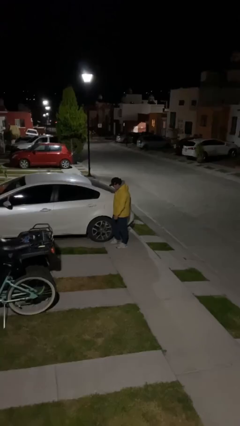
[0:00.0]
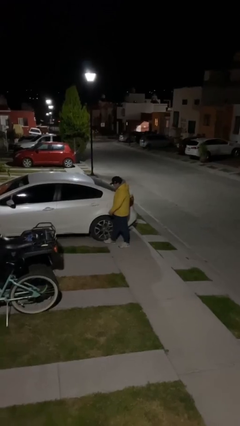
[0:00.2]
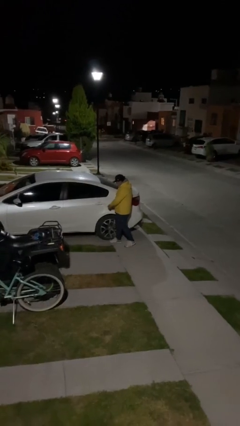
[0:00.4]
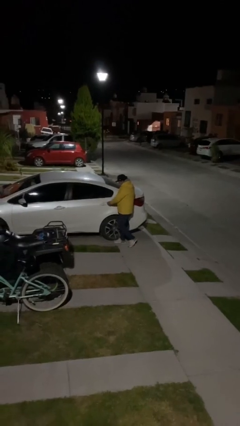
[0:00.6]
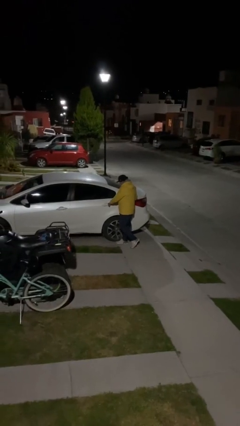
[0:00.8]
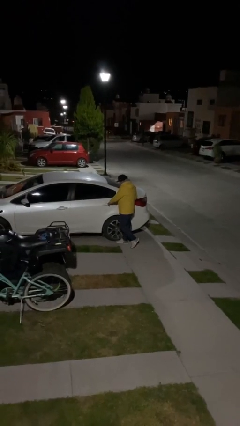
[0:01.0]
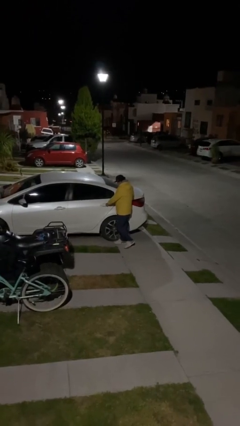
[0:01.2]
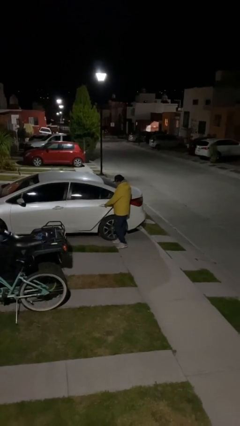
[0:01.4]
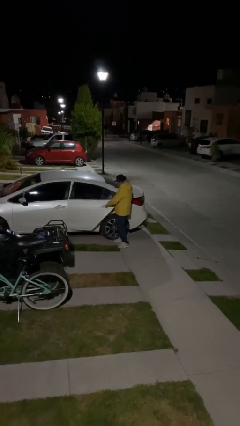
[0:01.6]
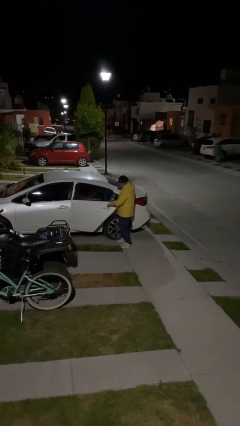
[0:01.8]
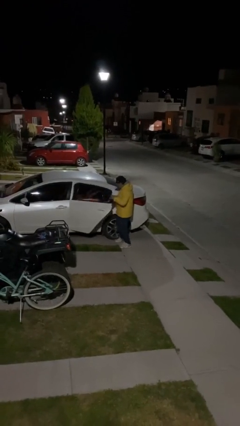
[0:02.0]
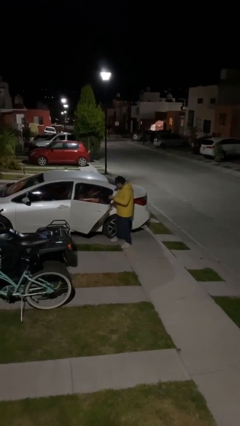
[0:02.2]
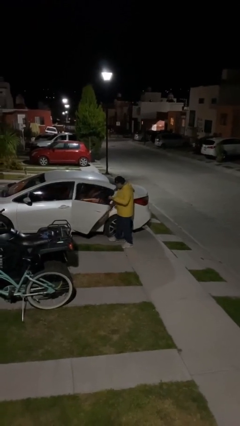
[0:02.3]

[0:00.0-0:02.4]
person opens car door

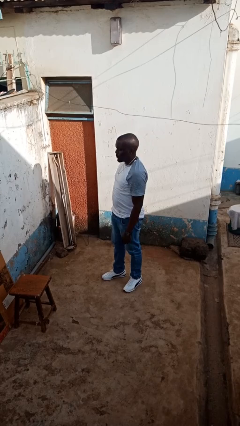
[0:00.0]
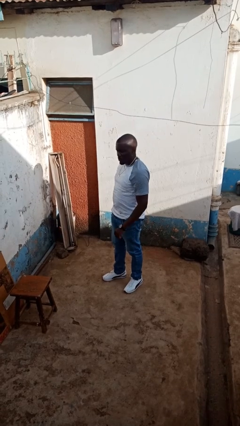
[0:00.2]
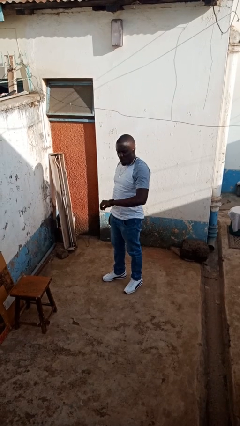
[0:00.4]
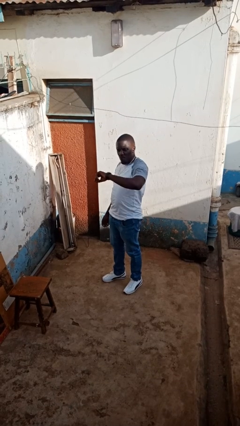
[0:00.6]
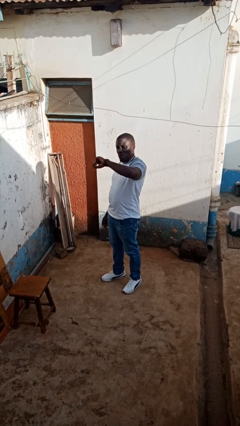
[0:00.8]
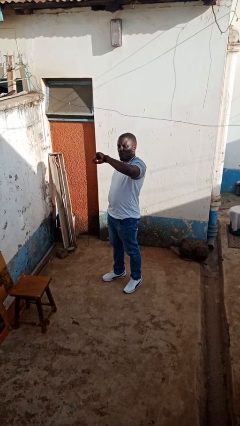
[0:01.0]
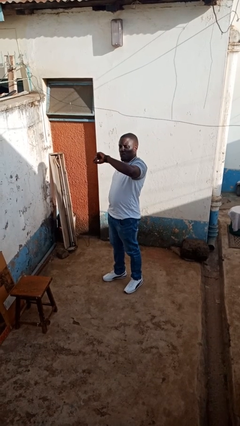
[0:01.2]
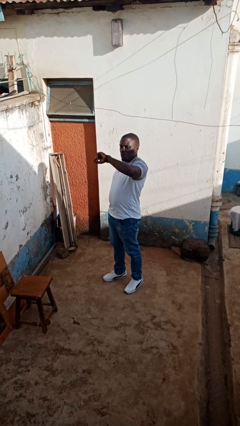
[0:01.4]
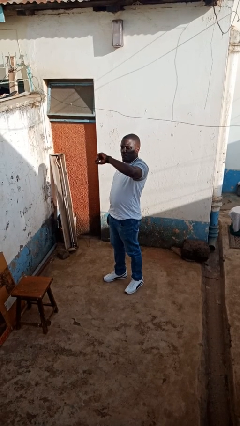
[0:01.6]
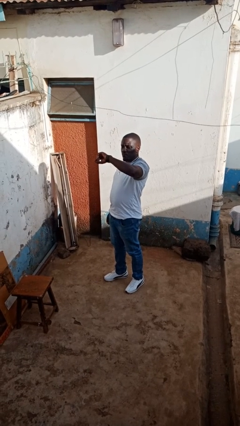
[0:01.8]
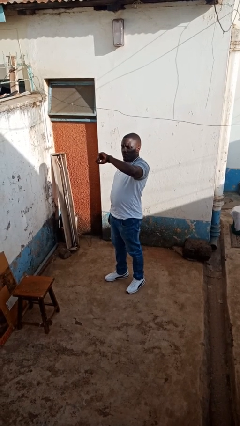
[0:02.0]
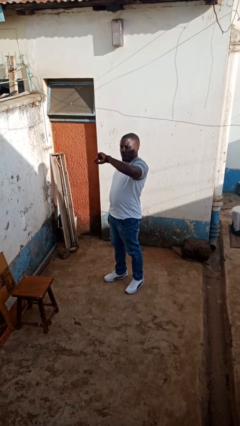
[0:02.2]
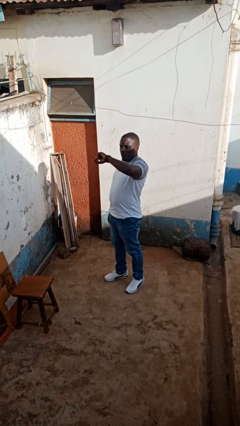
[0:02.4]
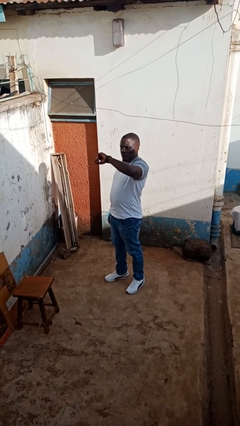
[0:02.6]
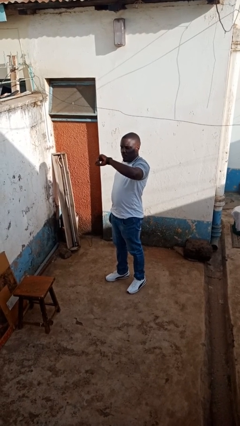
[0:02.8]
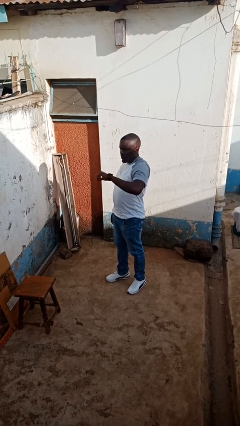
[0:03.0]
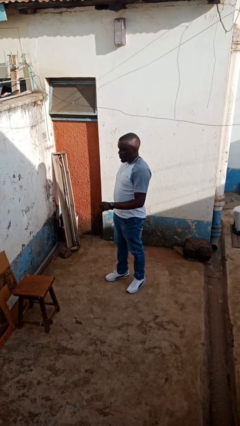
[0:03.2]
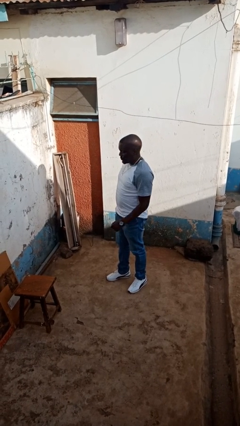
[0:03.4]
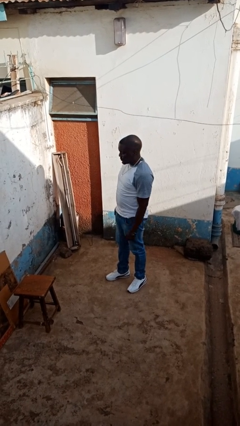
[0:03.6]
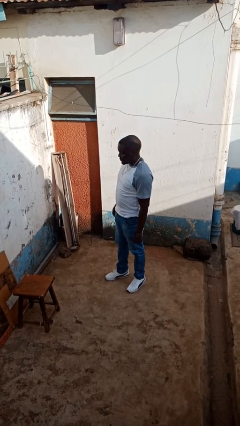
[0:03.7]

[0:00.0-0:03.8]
person looks at wristwatch

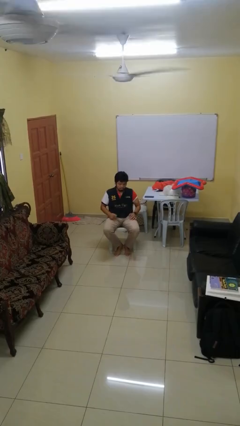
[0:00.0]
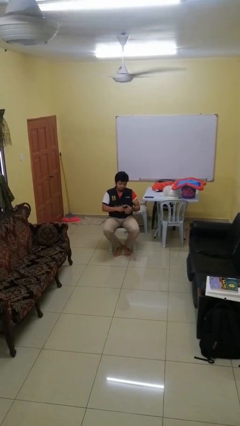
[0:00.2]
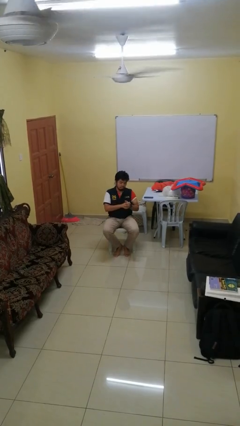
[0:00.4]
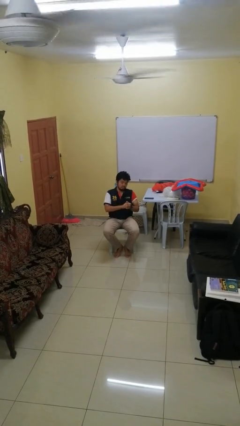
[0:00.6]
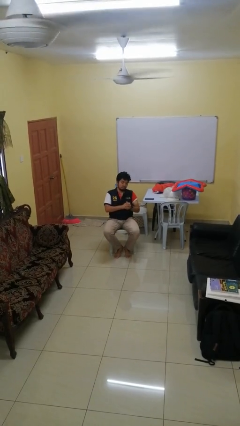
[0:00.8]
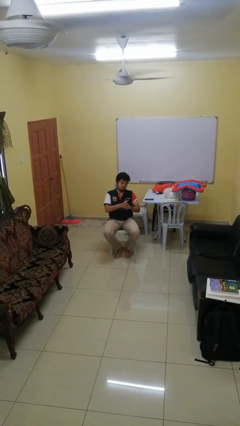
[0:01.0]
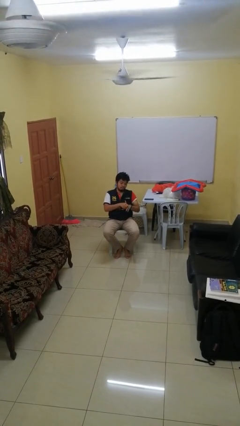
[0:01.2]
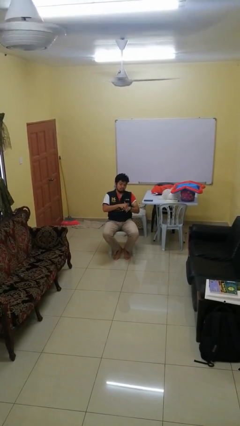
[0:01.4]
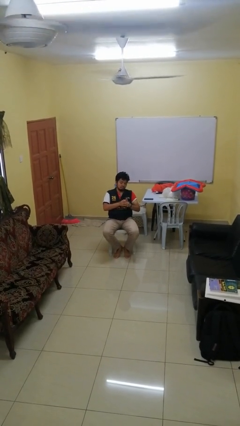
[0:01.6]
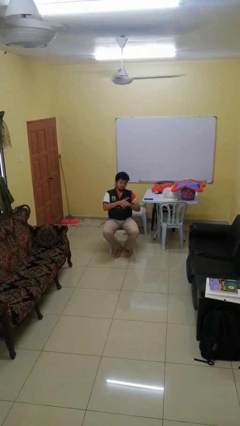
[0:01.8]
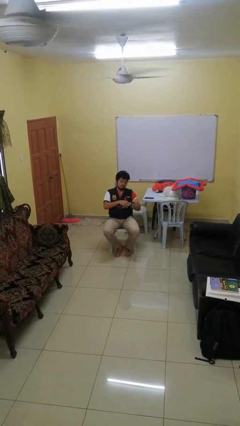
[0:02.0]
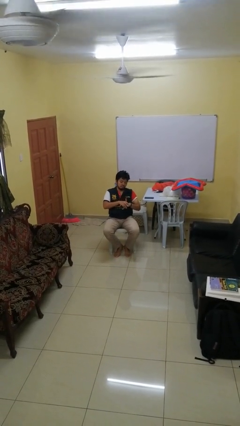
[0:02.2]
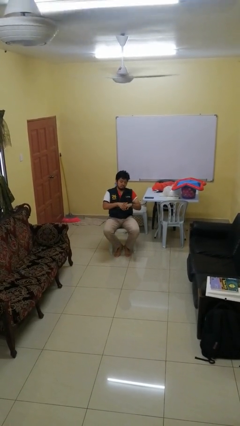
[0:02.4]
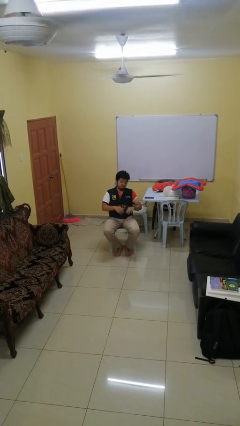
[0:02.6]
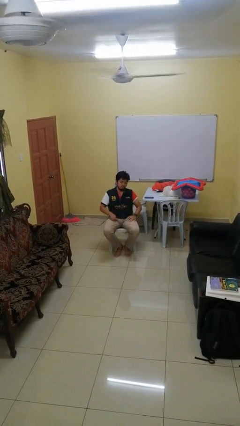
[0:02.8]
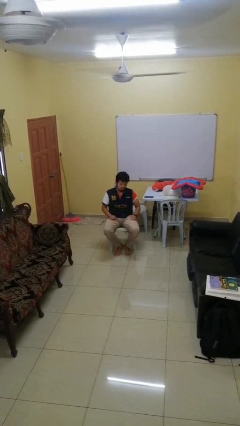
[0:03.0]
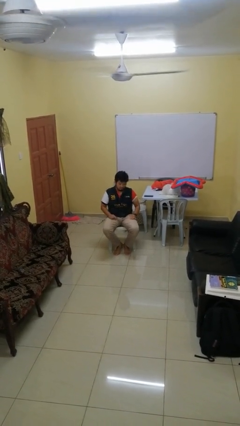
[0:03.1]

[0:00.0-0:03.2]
person cracks knuckles

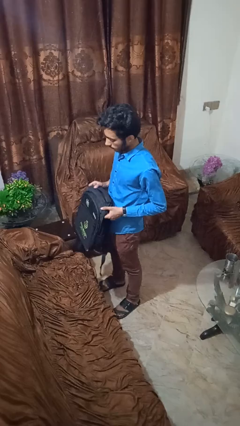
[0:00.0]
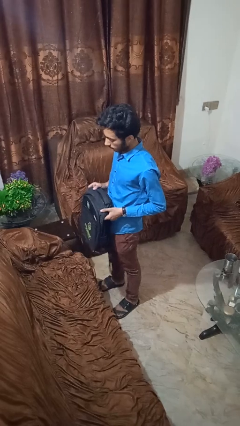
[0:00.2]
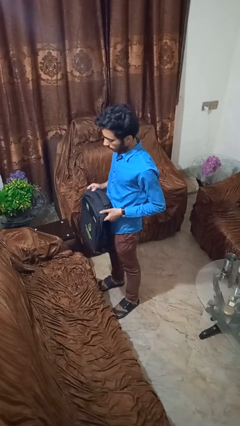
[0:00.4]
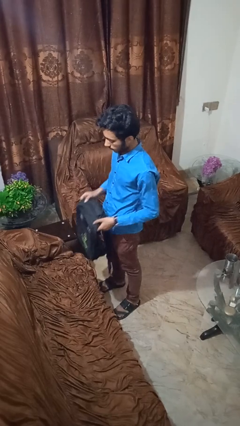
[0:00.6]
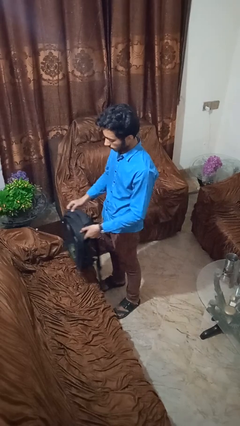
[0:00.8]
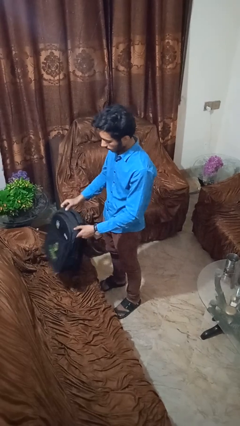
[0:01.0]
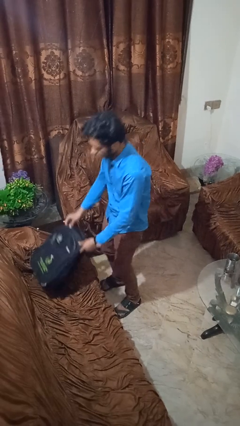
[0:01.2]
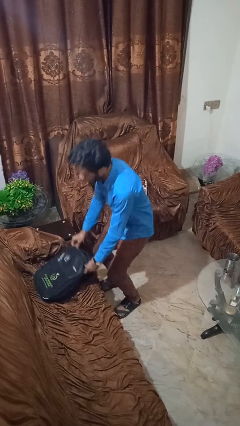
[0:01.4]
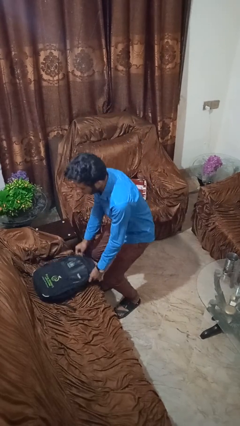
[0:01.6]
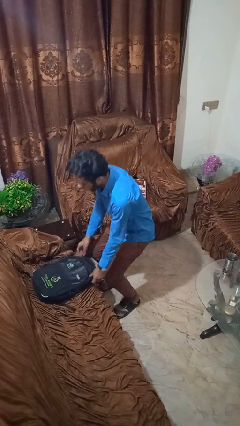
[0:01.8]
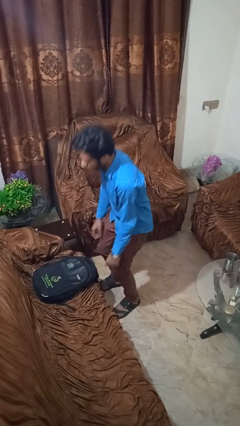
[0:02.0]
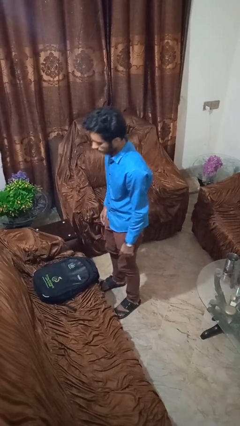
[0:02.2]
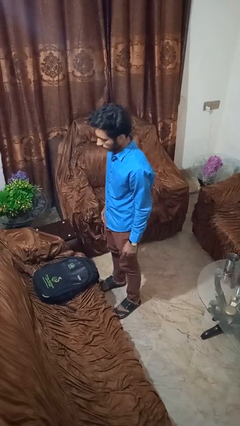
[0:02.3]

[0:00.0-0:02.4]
person puts down object on couch

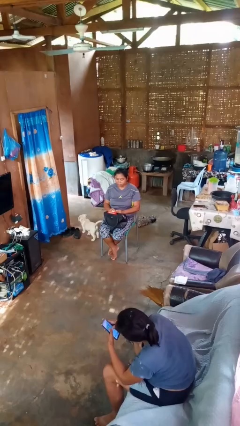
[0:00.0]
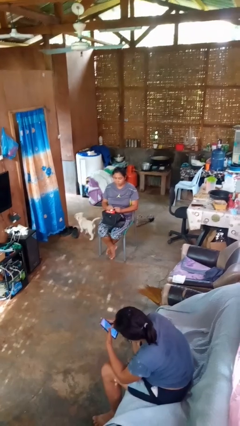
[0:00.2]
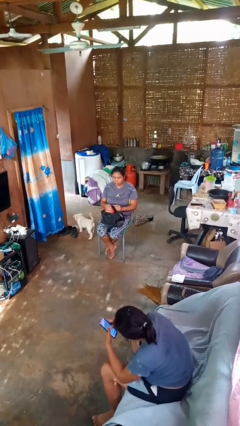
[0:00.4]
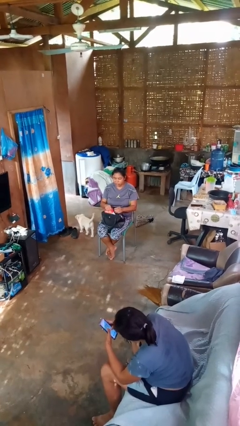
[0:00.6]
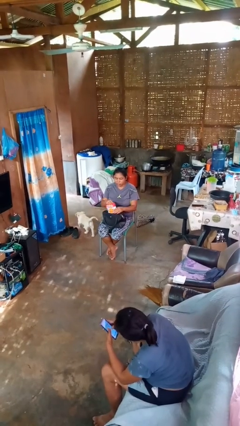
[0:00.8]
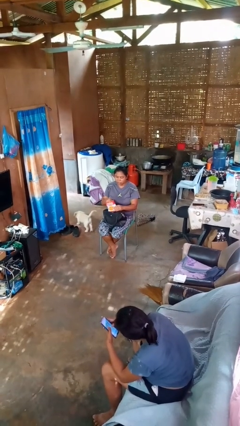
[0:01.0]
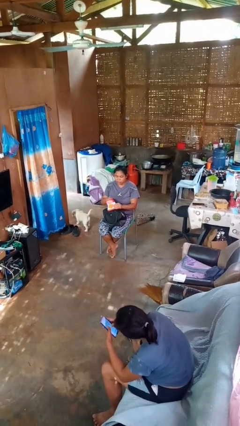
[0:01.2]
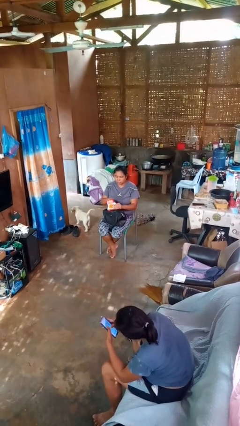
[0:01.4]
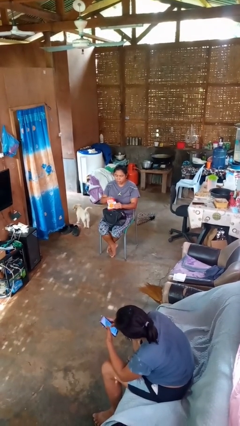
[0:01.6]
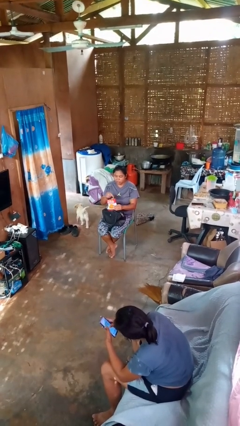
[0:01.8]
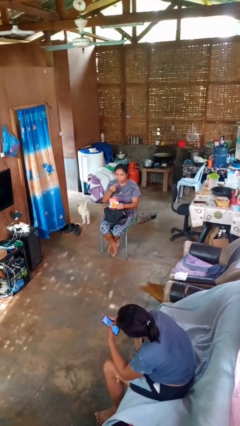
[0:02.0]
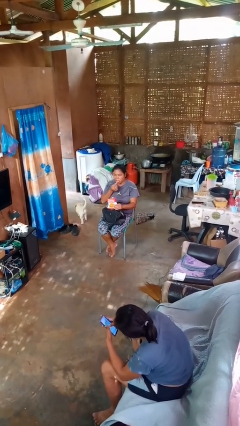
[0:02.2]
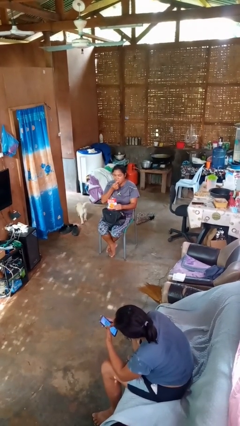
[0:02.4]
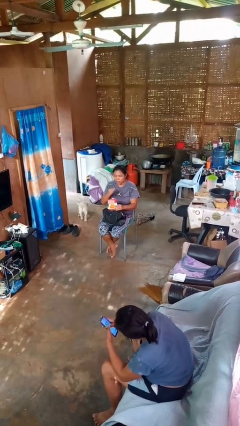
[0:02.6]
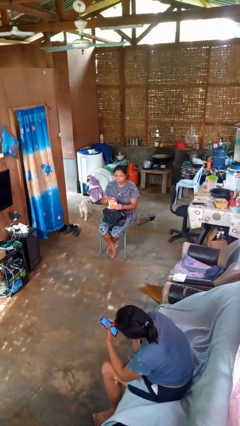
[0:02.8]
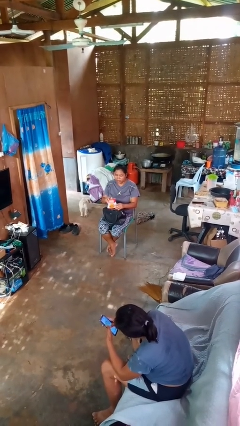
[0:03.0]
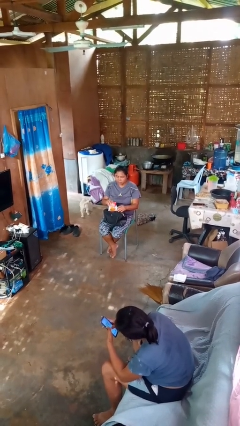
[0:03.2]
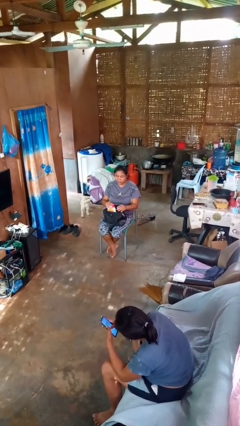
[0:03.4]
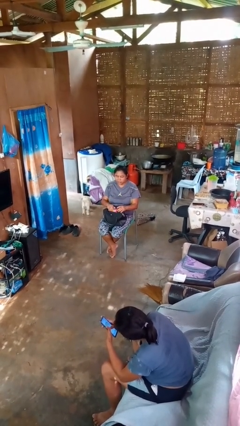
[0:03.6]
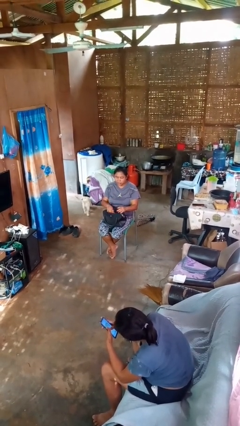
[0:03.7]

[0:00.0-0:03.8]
person eats snack from bag

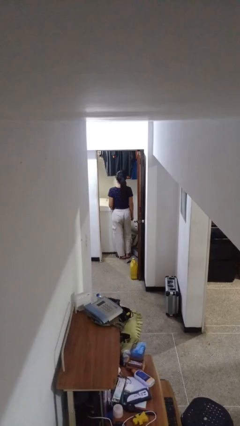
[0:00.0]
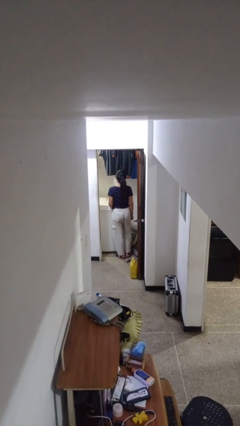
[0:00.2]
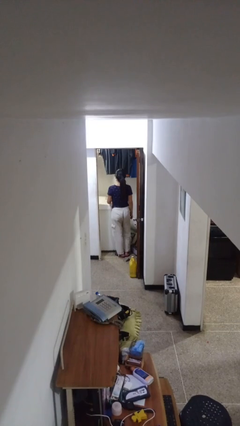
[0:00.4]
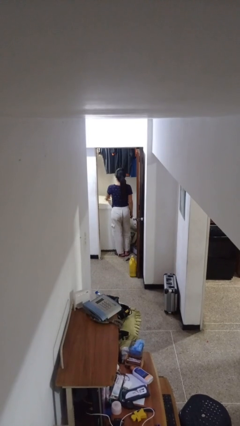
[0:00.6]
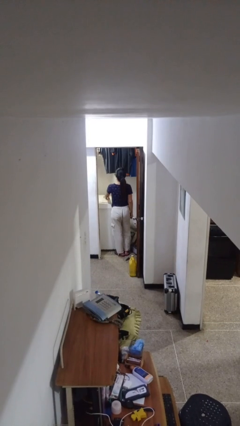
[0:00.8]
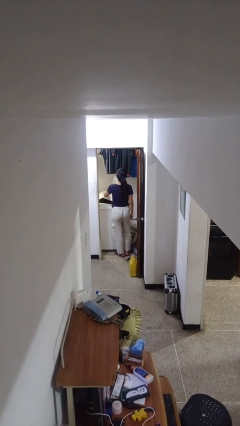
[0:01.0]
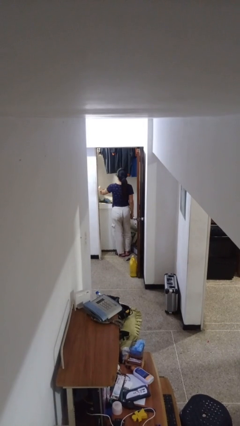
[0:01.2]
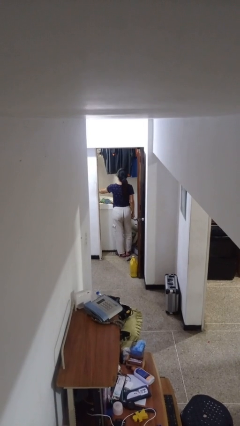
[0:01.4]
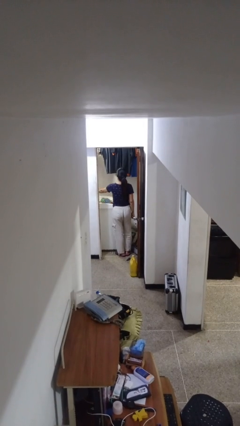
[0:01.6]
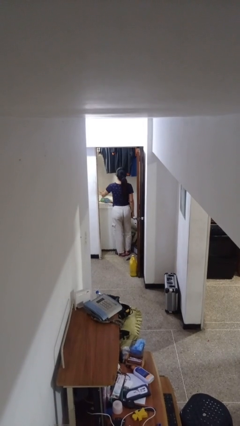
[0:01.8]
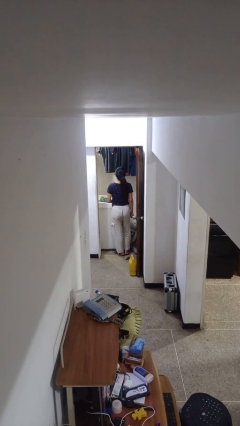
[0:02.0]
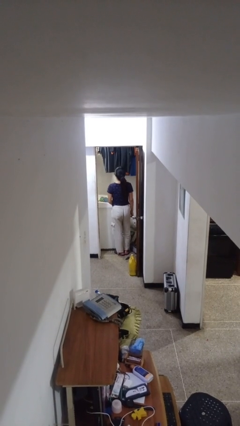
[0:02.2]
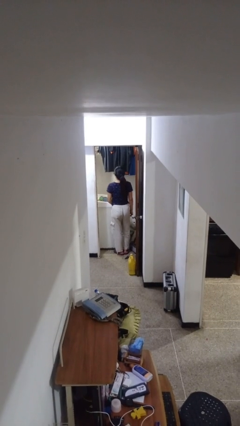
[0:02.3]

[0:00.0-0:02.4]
person opens clothes washer
